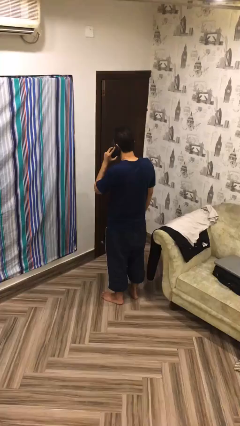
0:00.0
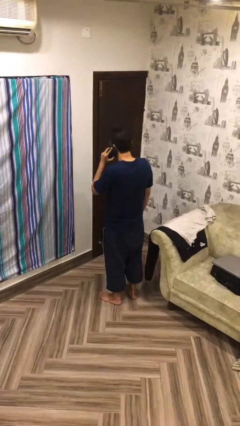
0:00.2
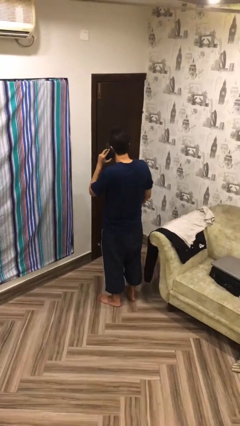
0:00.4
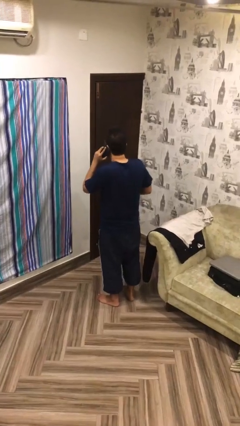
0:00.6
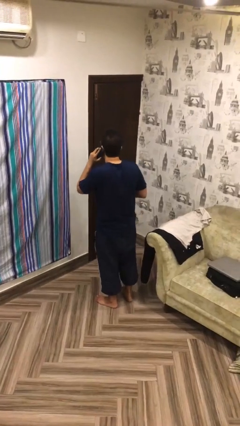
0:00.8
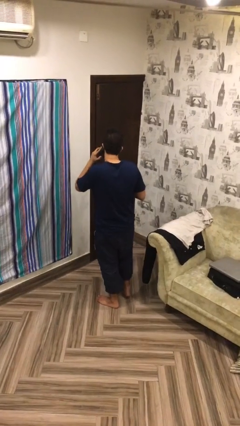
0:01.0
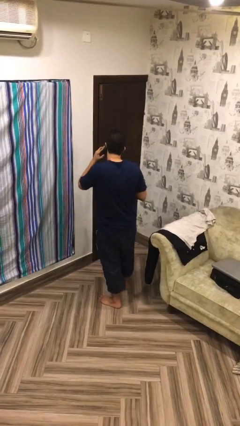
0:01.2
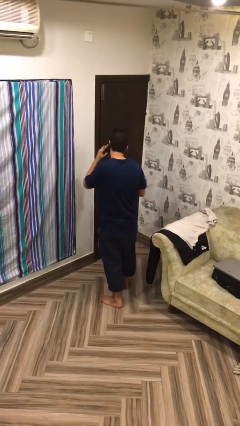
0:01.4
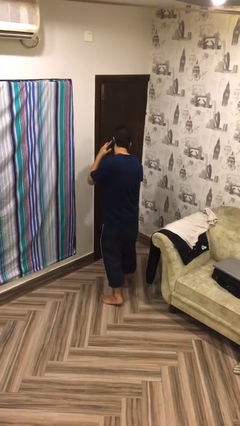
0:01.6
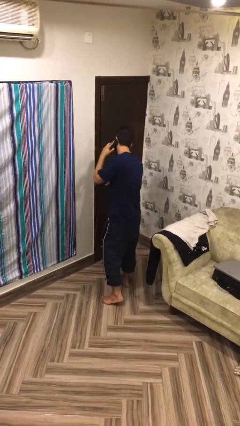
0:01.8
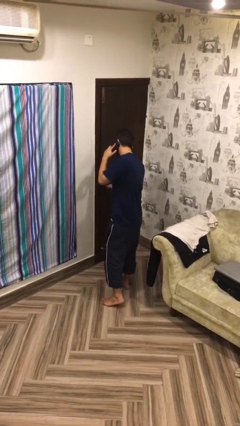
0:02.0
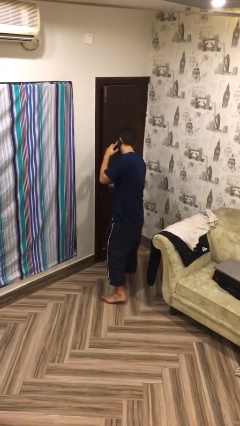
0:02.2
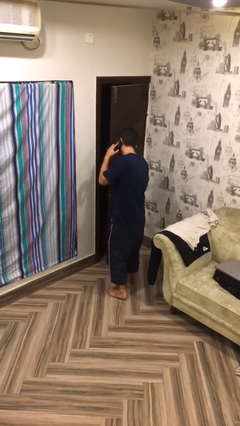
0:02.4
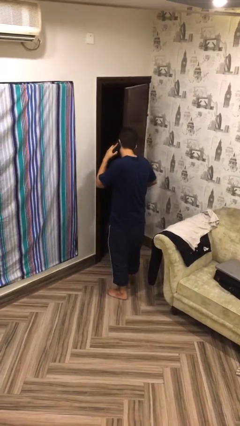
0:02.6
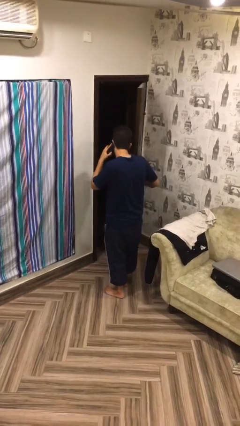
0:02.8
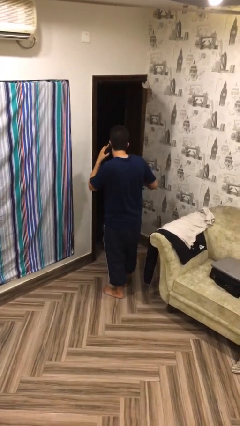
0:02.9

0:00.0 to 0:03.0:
person opens facility door

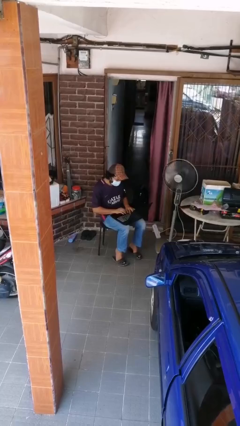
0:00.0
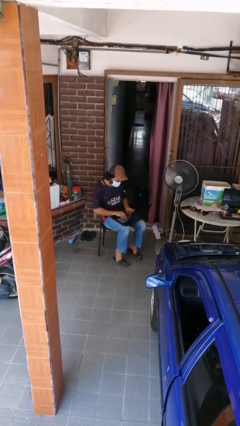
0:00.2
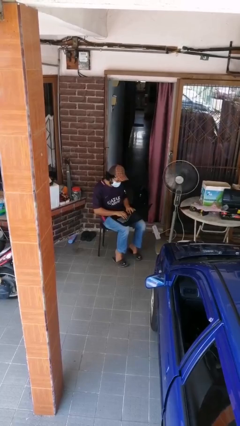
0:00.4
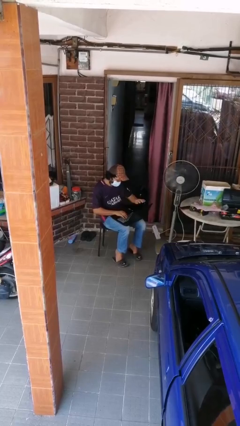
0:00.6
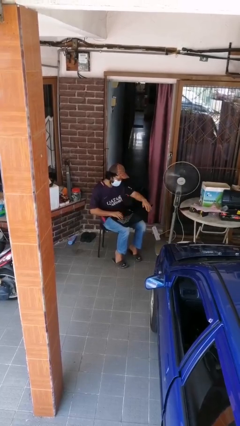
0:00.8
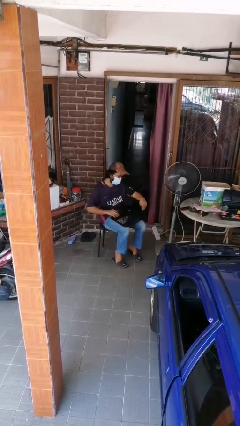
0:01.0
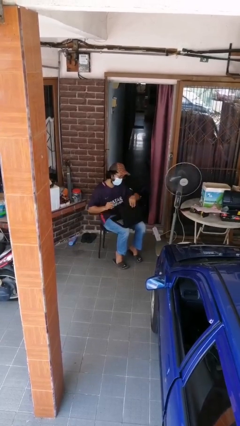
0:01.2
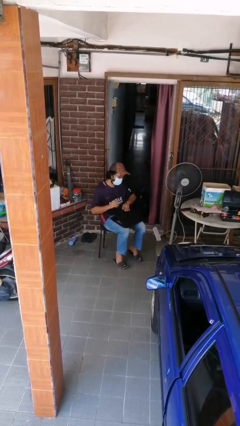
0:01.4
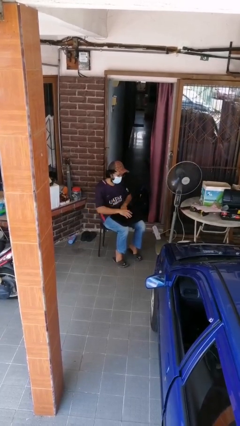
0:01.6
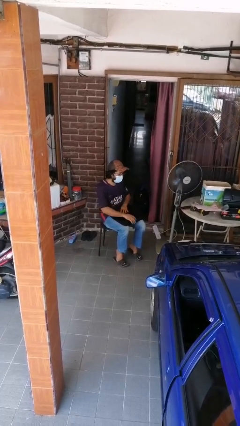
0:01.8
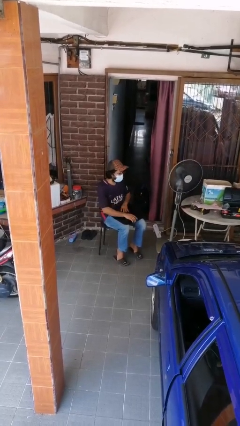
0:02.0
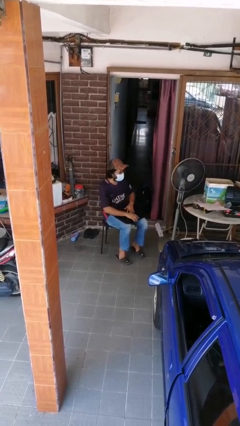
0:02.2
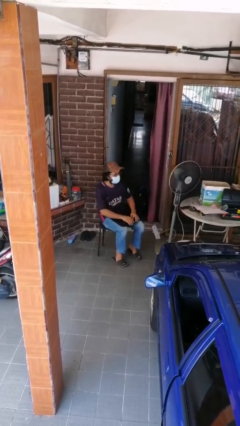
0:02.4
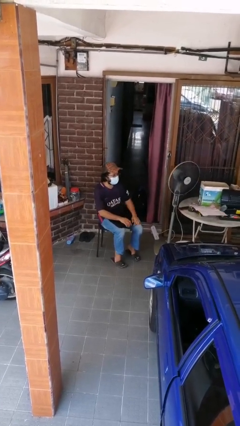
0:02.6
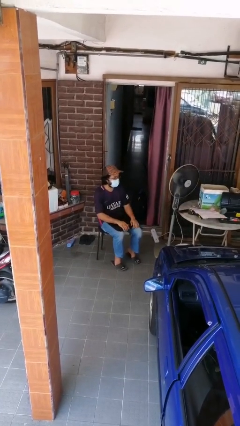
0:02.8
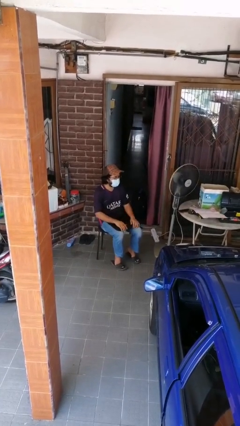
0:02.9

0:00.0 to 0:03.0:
person interacts with laptop

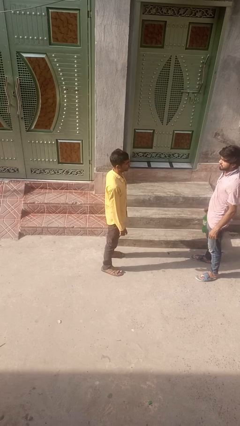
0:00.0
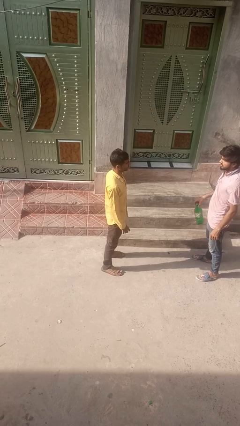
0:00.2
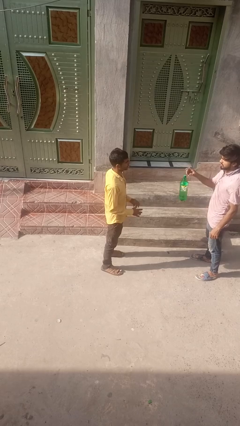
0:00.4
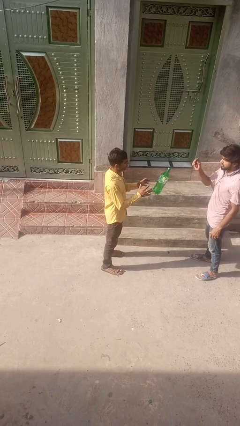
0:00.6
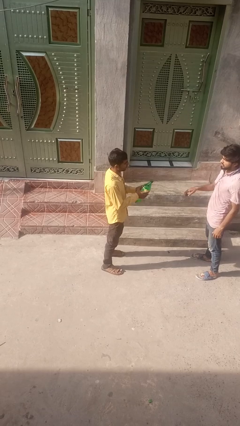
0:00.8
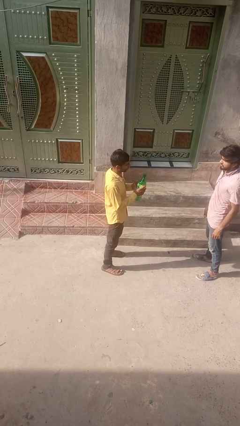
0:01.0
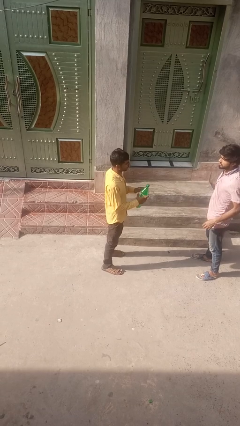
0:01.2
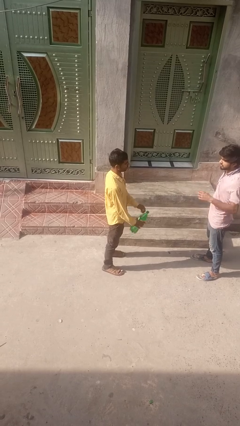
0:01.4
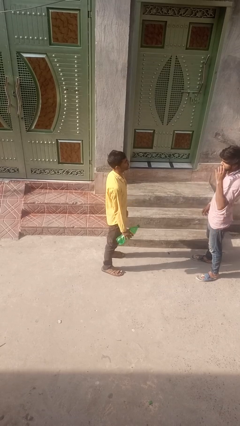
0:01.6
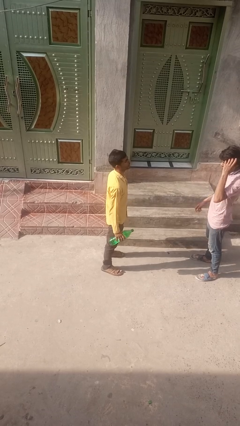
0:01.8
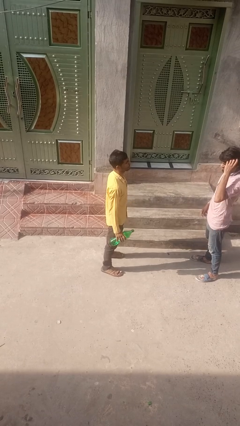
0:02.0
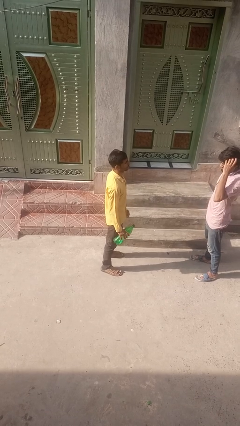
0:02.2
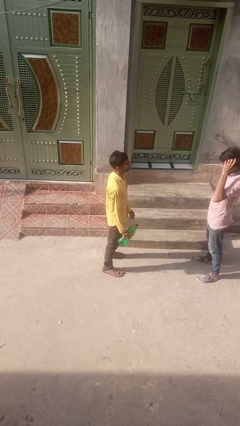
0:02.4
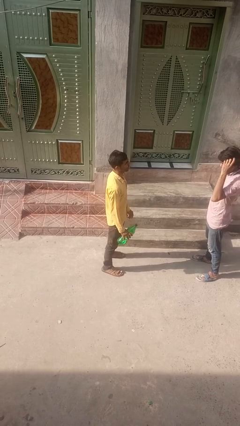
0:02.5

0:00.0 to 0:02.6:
person catches object from person

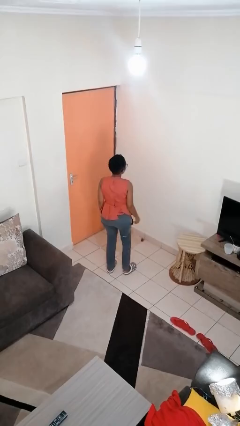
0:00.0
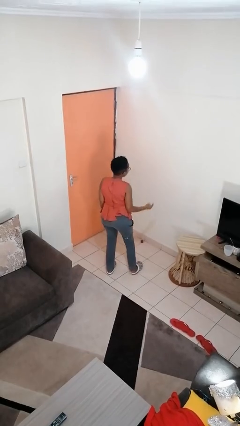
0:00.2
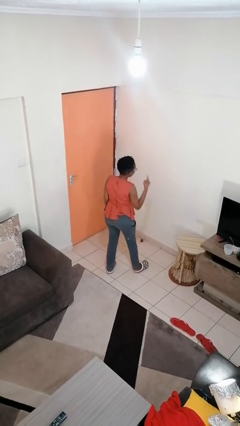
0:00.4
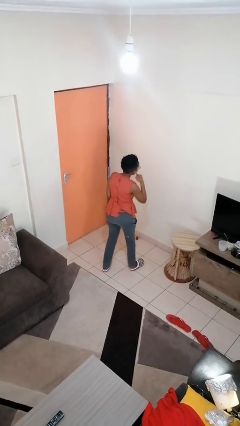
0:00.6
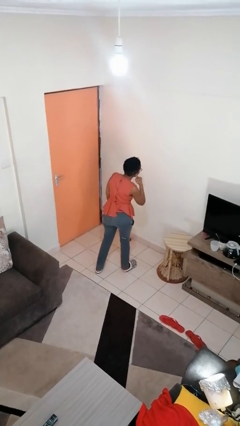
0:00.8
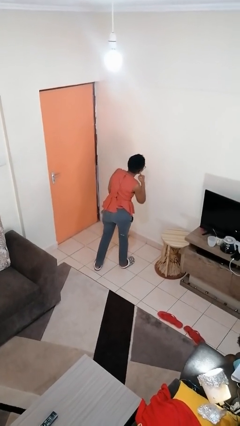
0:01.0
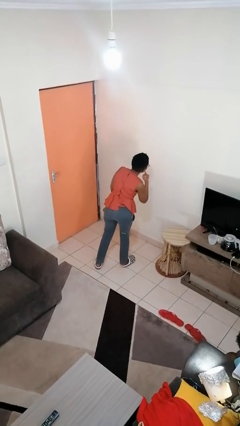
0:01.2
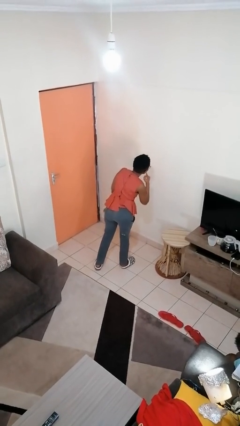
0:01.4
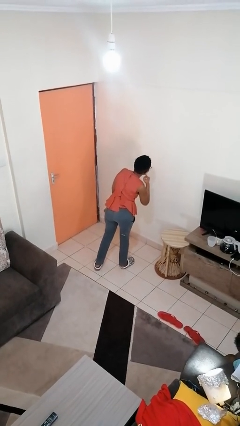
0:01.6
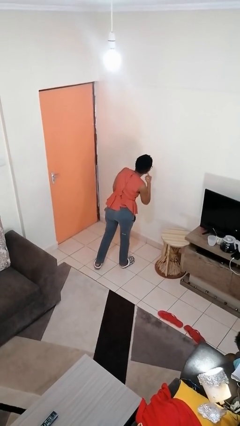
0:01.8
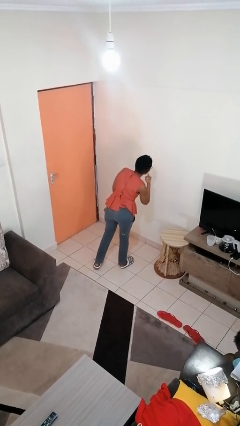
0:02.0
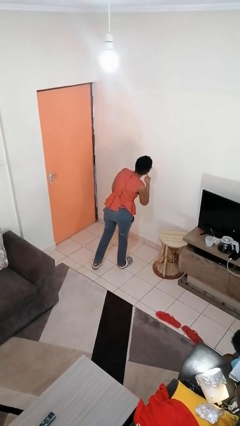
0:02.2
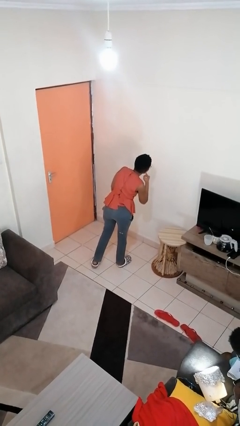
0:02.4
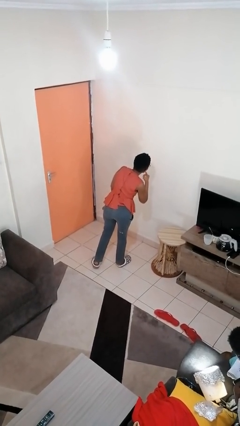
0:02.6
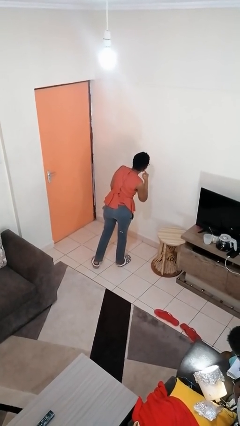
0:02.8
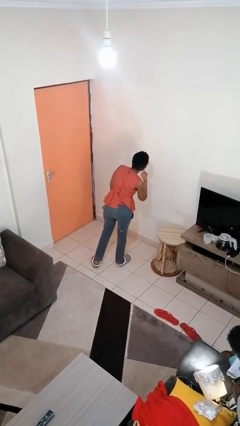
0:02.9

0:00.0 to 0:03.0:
person gestures listen closely

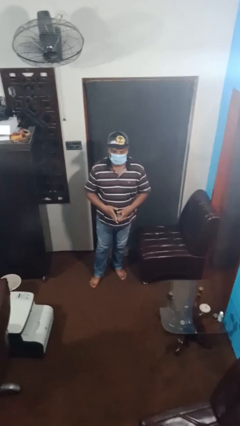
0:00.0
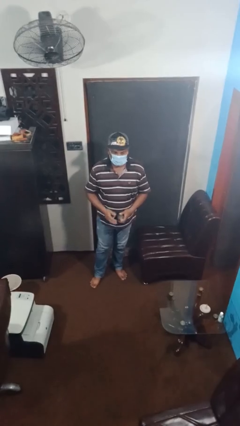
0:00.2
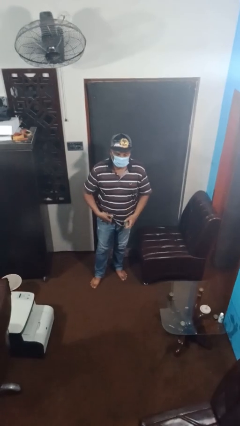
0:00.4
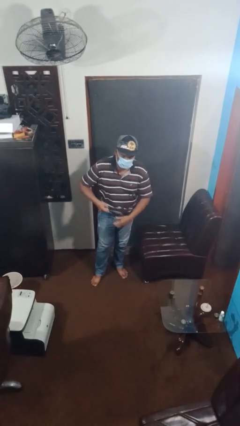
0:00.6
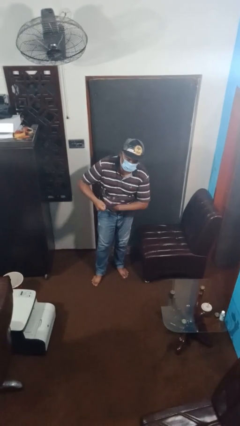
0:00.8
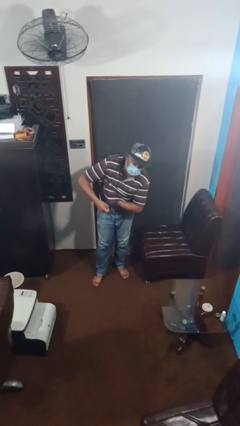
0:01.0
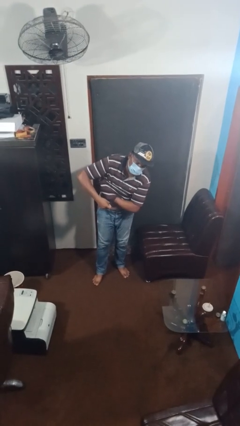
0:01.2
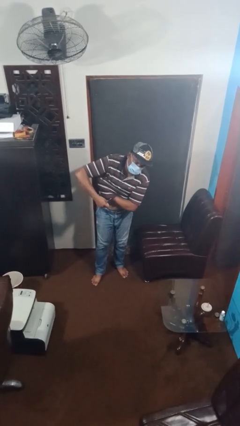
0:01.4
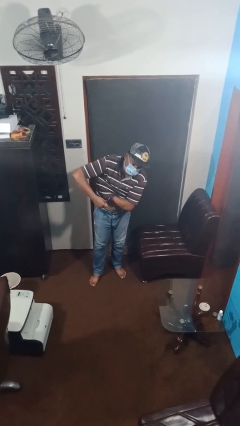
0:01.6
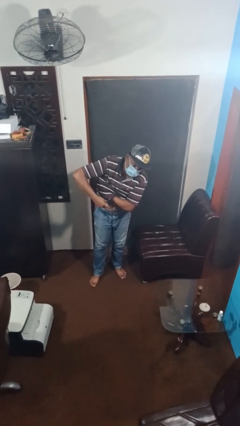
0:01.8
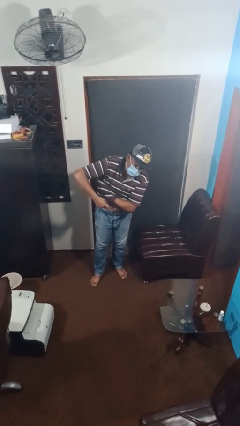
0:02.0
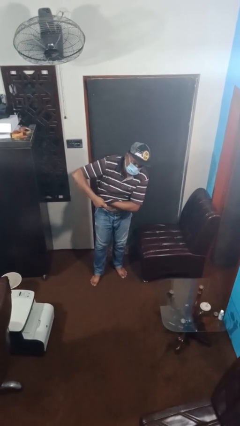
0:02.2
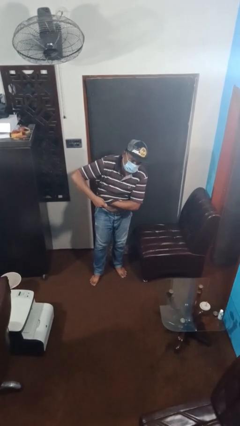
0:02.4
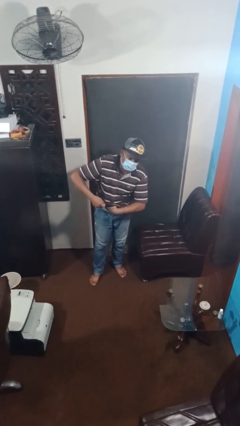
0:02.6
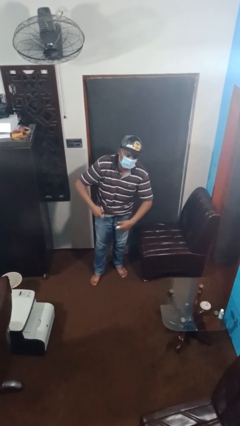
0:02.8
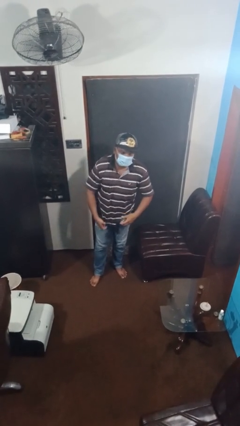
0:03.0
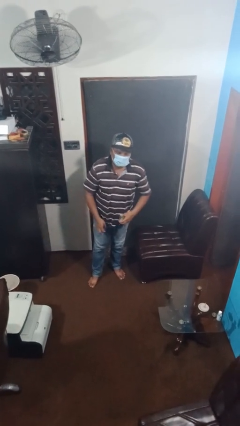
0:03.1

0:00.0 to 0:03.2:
person applies deodorant

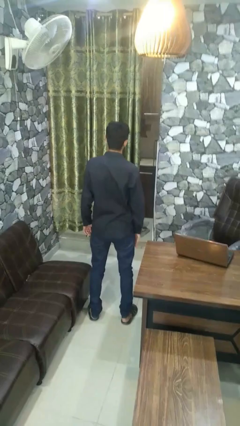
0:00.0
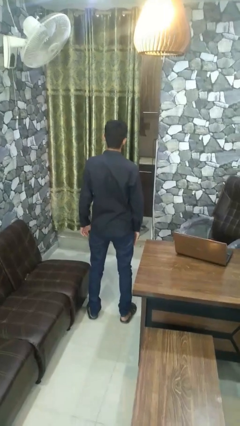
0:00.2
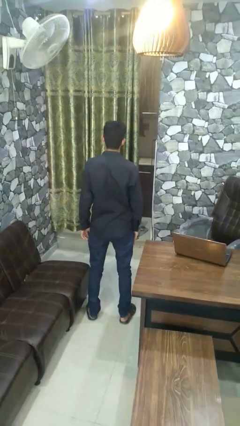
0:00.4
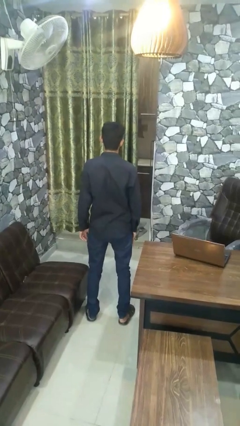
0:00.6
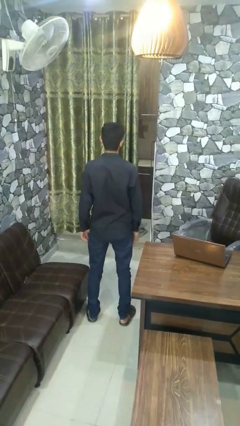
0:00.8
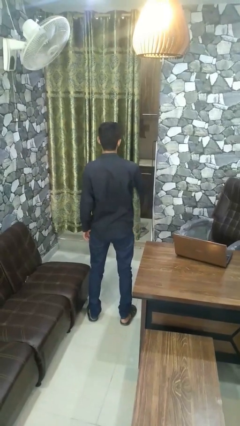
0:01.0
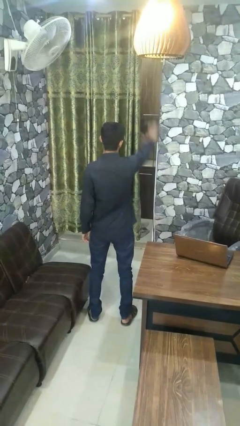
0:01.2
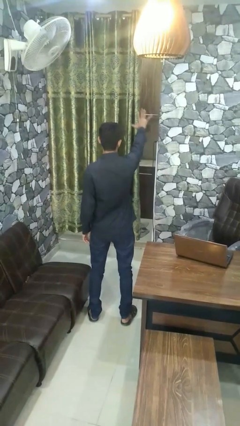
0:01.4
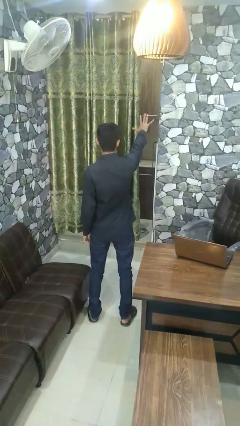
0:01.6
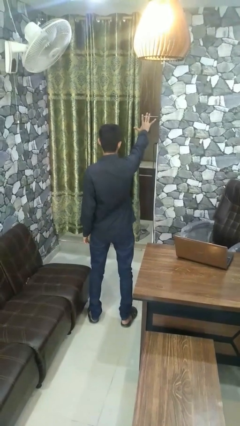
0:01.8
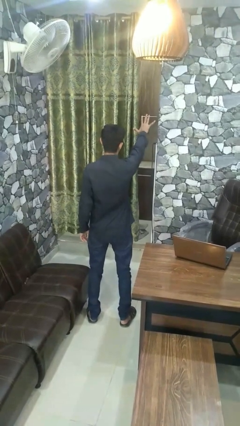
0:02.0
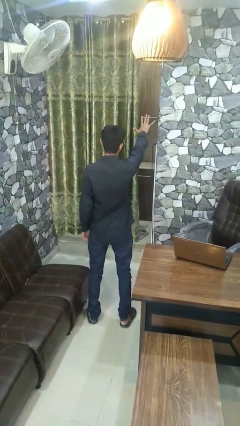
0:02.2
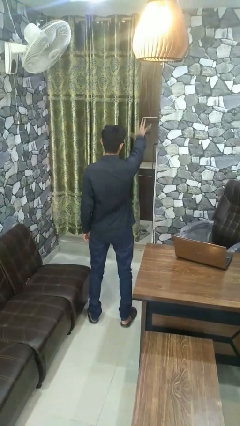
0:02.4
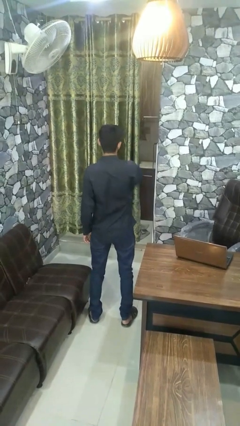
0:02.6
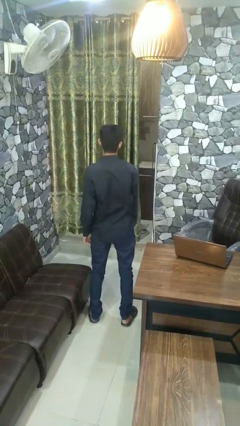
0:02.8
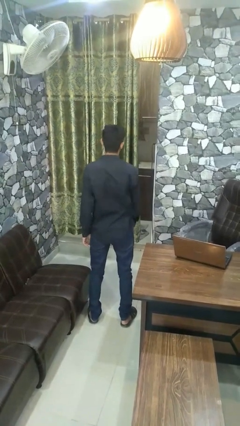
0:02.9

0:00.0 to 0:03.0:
person gestures number five
